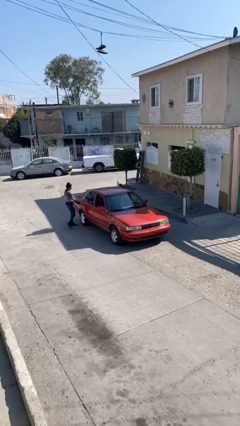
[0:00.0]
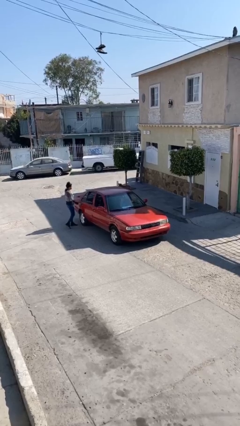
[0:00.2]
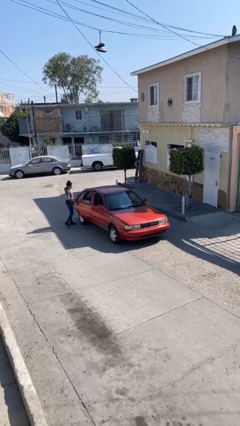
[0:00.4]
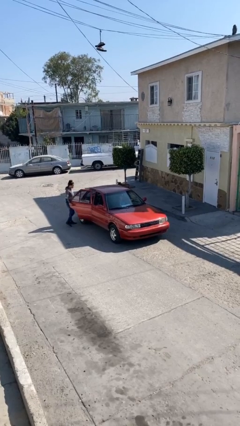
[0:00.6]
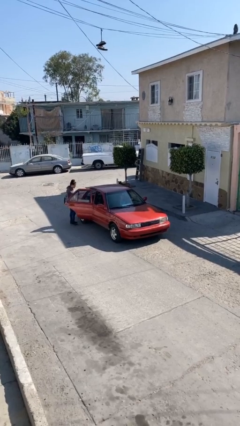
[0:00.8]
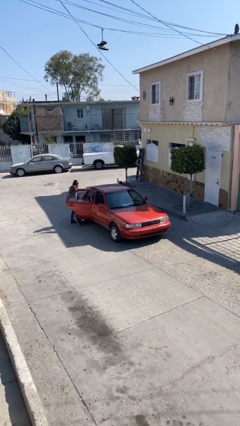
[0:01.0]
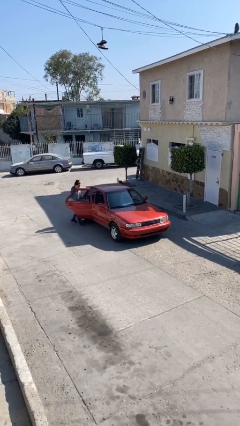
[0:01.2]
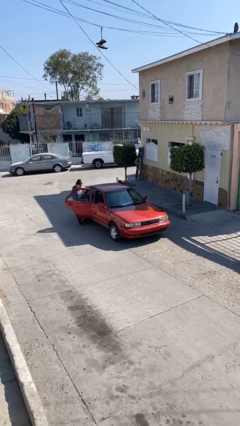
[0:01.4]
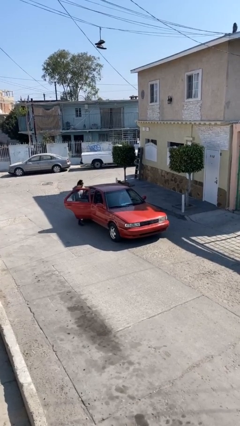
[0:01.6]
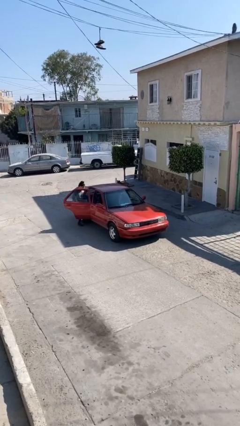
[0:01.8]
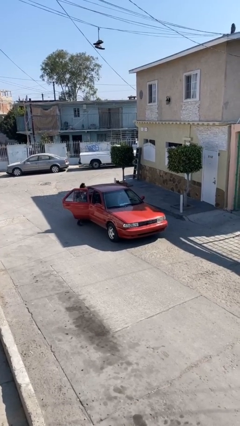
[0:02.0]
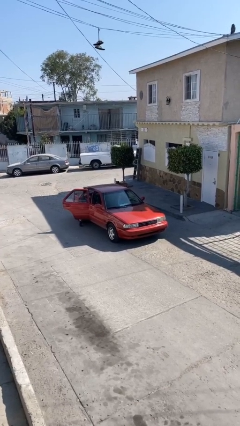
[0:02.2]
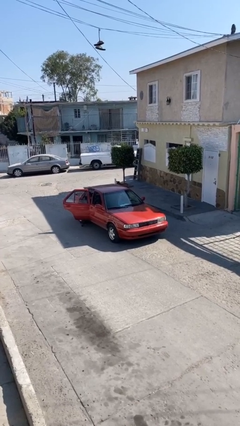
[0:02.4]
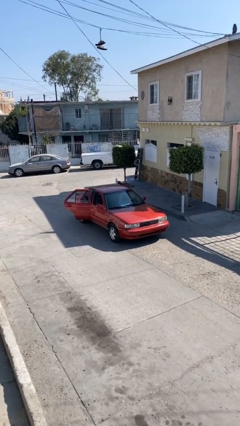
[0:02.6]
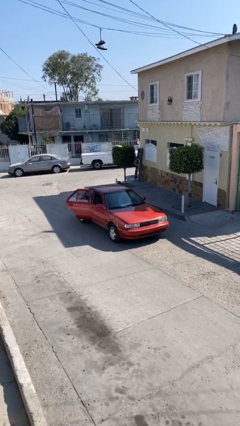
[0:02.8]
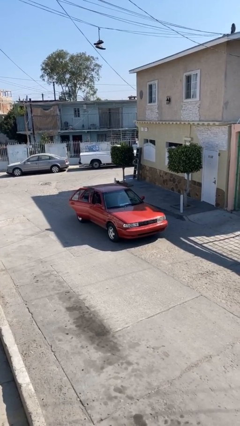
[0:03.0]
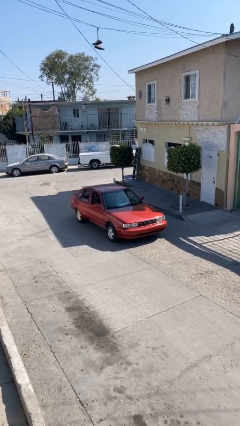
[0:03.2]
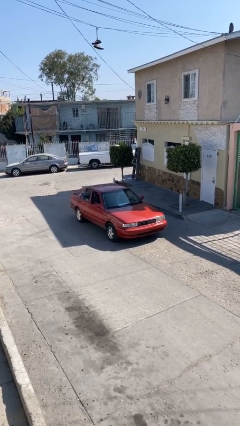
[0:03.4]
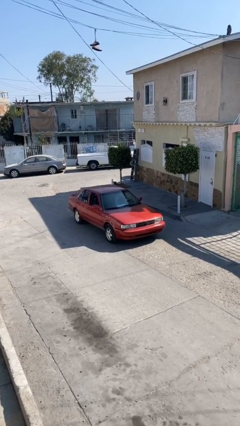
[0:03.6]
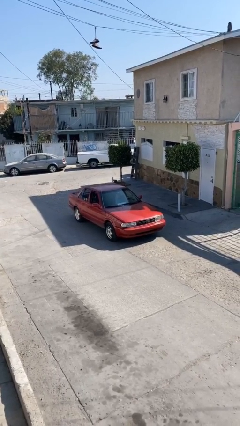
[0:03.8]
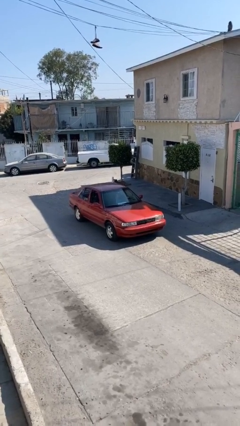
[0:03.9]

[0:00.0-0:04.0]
car picks up person

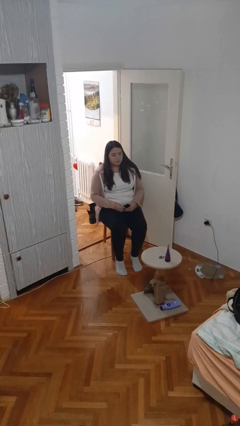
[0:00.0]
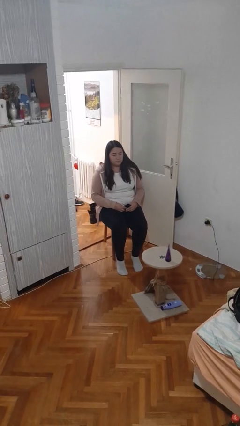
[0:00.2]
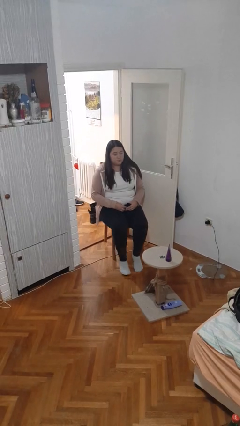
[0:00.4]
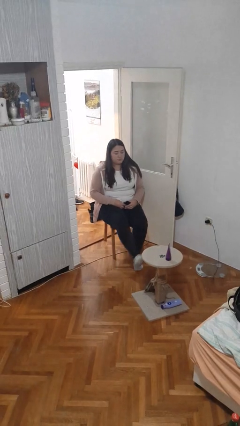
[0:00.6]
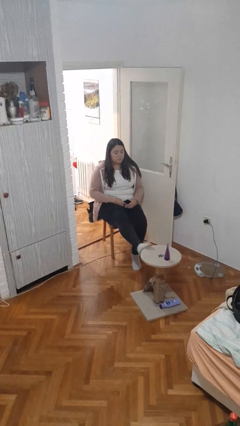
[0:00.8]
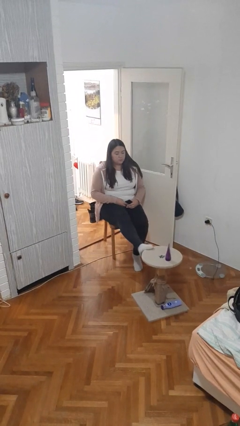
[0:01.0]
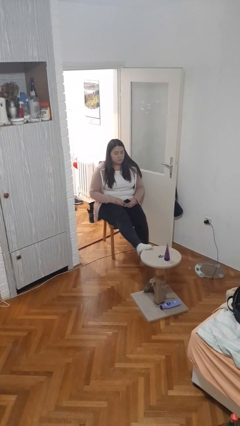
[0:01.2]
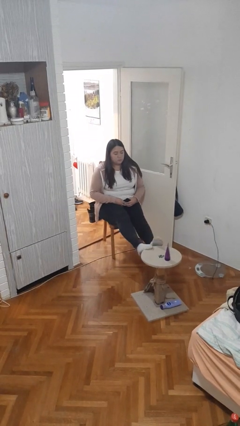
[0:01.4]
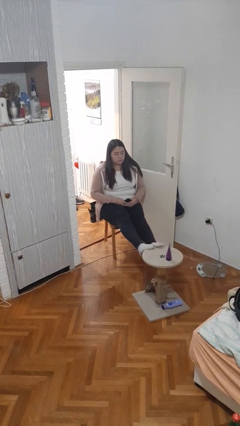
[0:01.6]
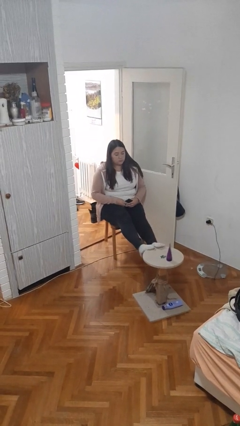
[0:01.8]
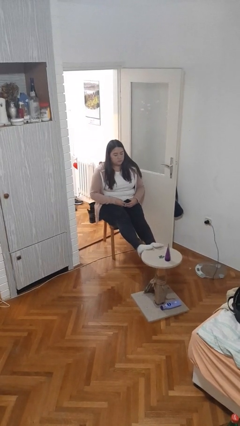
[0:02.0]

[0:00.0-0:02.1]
person puts feet up

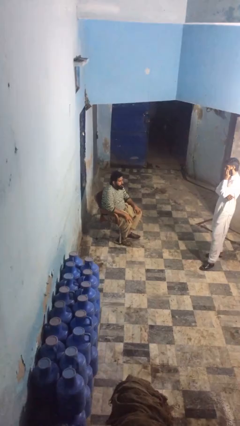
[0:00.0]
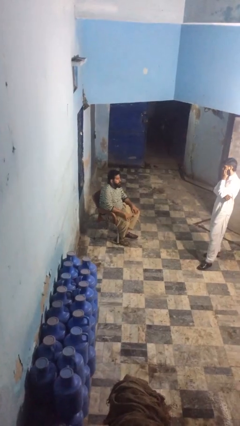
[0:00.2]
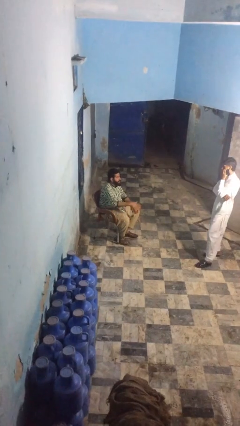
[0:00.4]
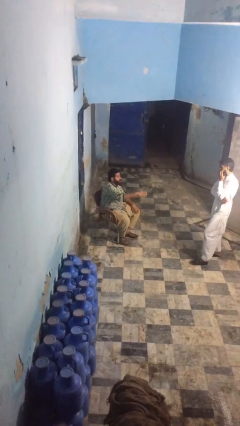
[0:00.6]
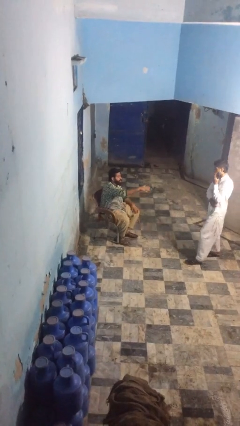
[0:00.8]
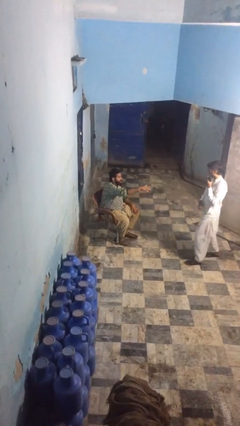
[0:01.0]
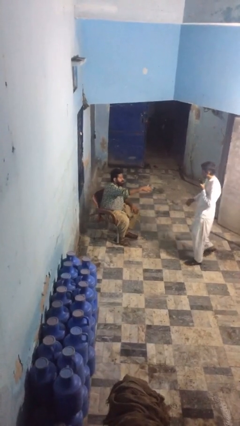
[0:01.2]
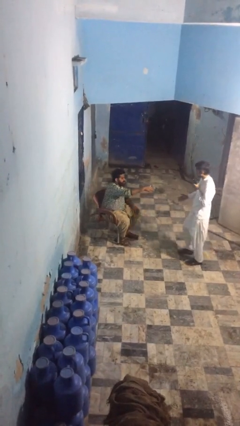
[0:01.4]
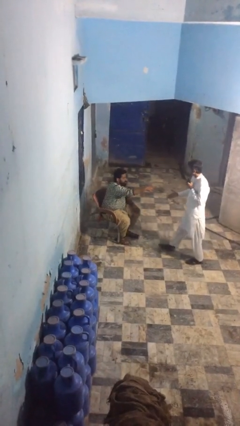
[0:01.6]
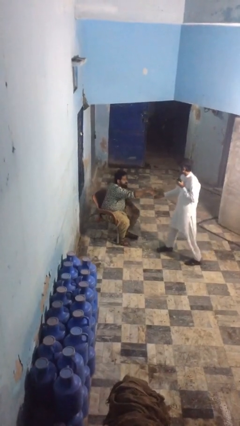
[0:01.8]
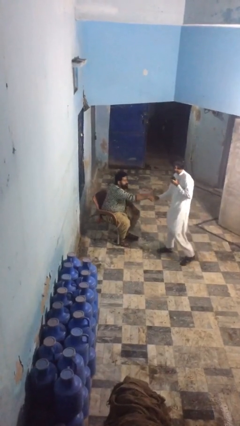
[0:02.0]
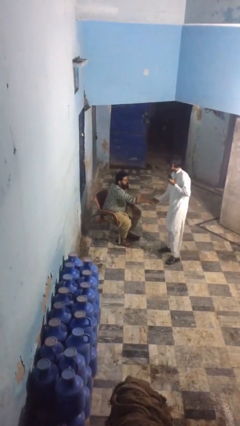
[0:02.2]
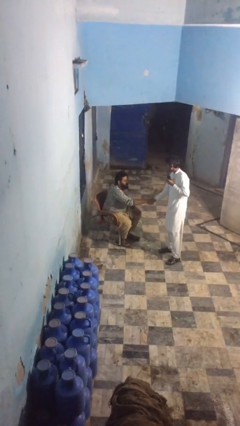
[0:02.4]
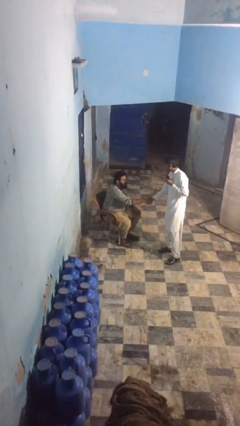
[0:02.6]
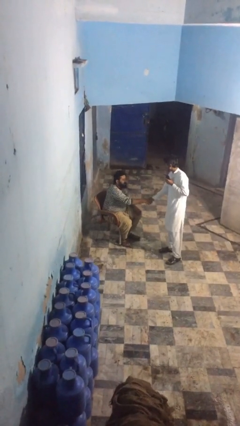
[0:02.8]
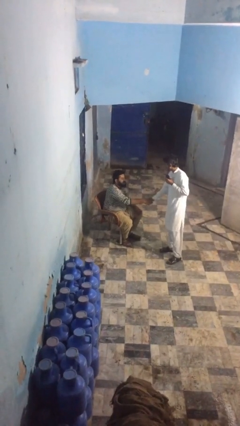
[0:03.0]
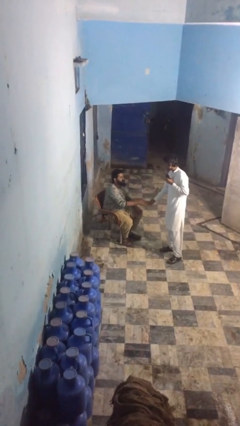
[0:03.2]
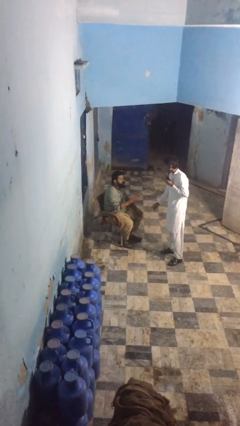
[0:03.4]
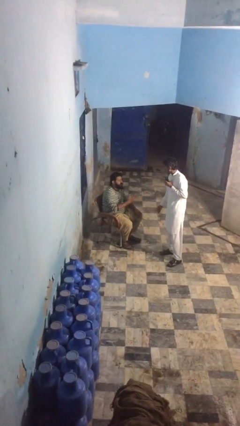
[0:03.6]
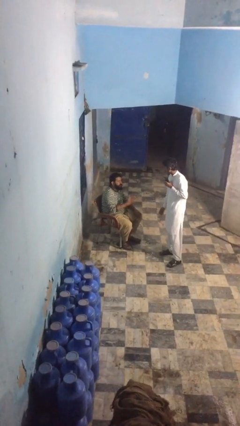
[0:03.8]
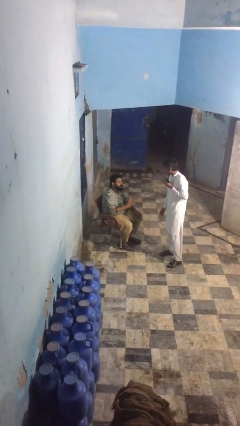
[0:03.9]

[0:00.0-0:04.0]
person shakes hand

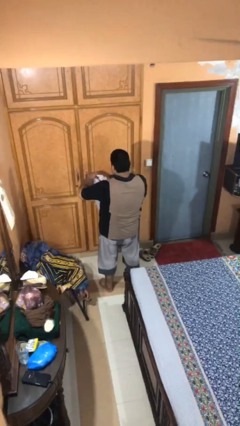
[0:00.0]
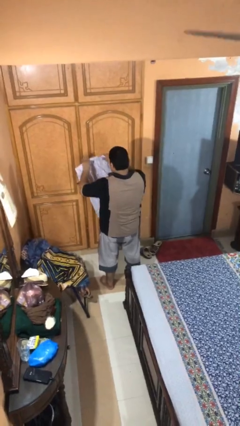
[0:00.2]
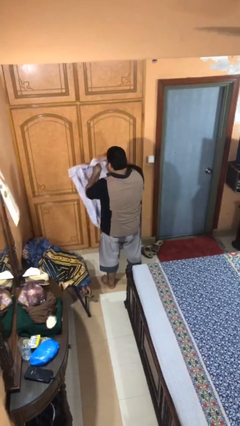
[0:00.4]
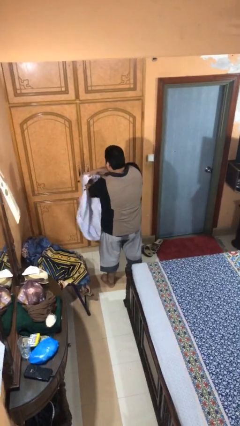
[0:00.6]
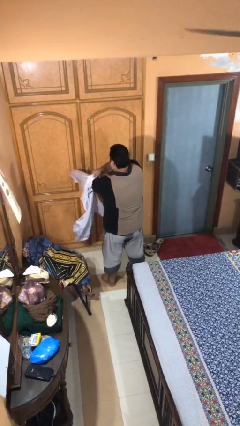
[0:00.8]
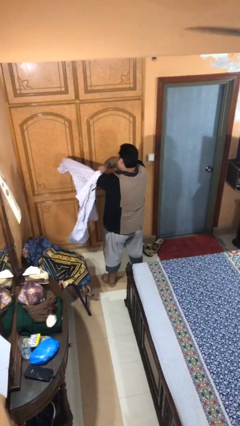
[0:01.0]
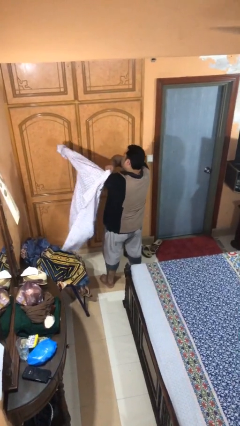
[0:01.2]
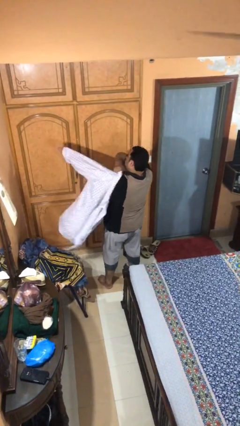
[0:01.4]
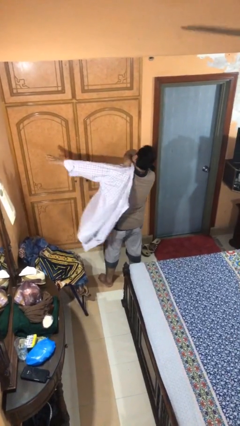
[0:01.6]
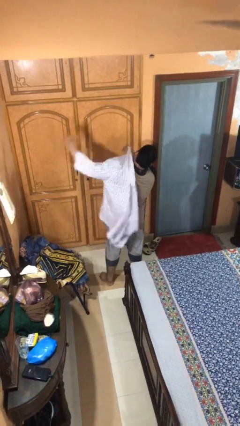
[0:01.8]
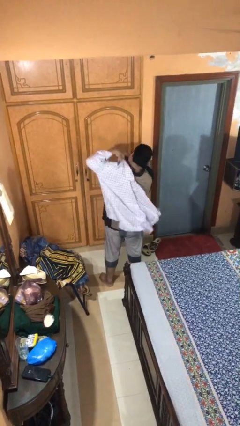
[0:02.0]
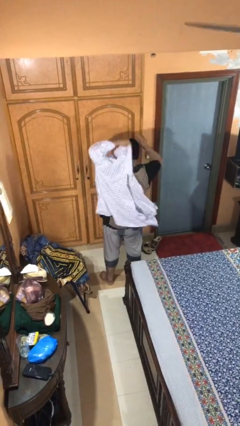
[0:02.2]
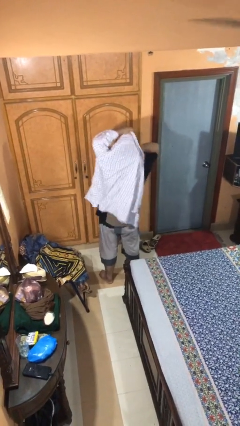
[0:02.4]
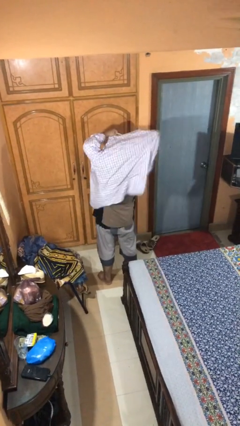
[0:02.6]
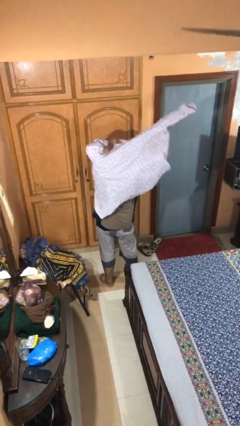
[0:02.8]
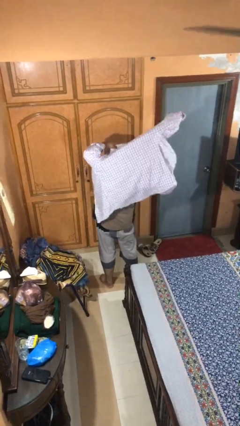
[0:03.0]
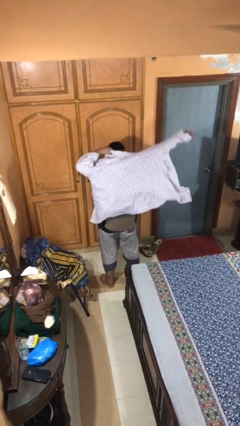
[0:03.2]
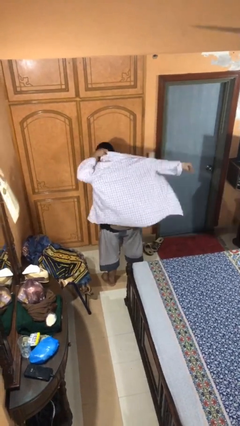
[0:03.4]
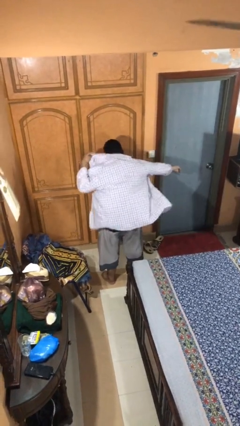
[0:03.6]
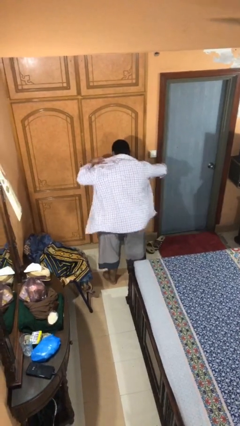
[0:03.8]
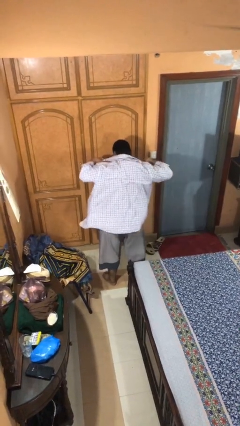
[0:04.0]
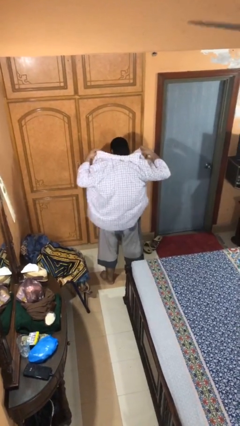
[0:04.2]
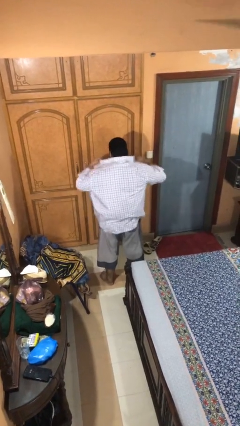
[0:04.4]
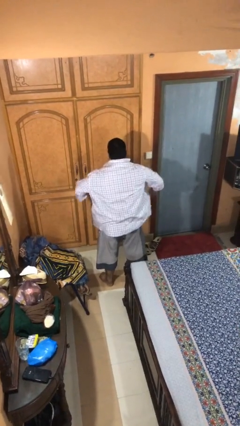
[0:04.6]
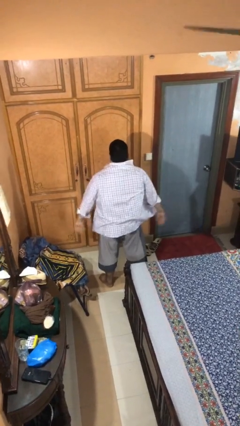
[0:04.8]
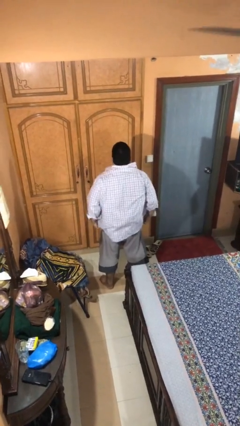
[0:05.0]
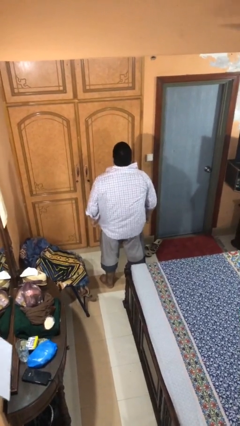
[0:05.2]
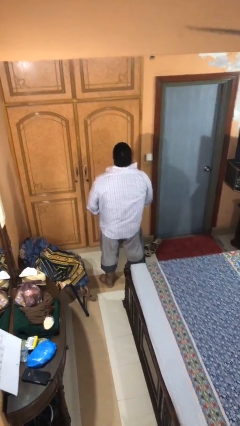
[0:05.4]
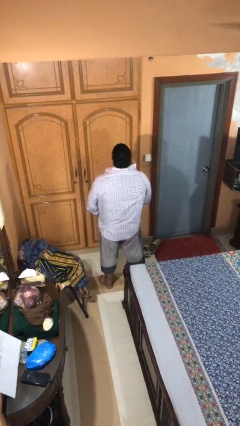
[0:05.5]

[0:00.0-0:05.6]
person puts on shirt

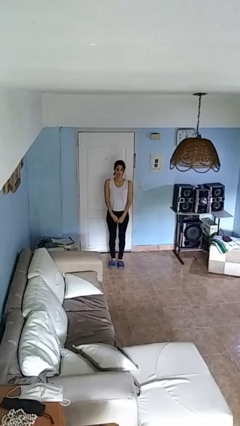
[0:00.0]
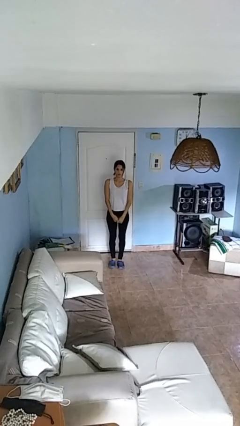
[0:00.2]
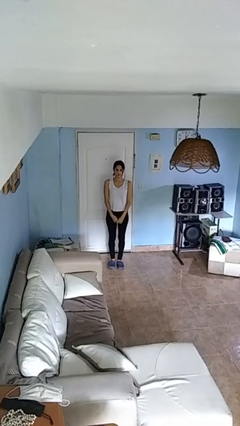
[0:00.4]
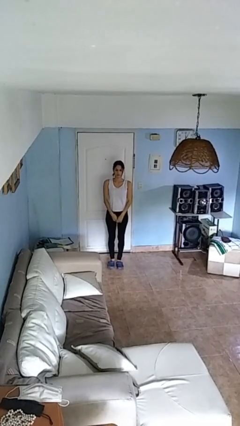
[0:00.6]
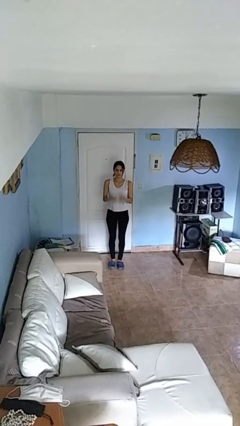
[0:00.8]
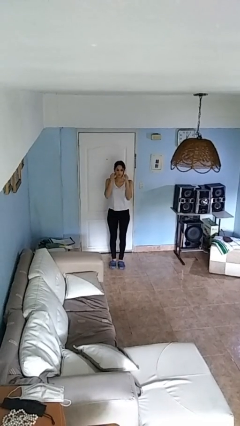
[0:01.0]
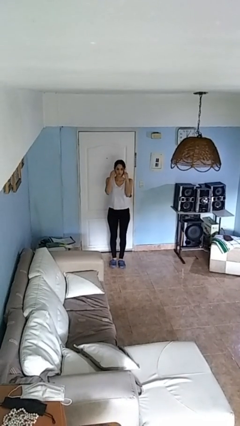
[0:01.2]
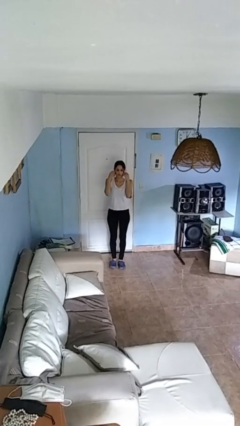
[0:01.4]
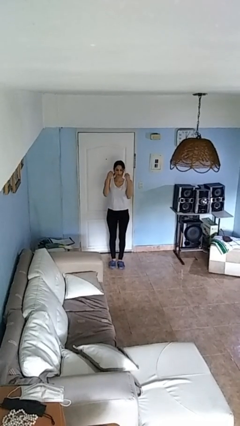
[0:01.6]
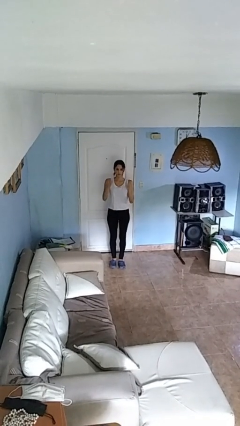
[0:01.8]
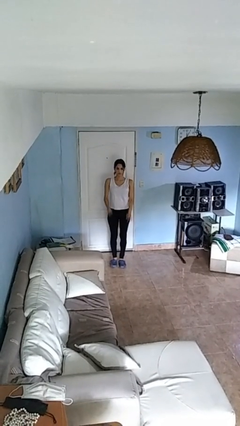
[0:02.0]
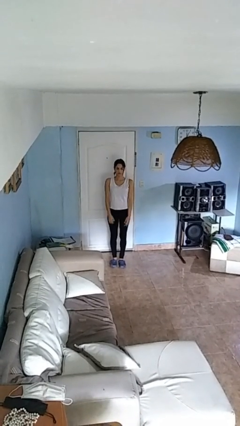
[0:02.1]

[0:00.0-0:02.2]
person takes off earrings
